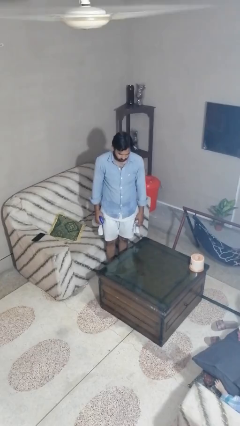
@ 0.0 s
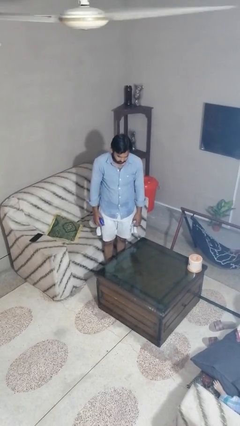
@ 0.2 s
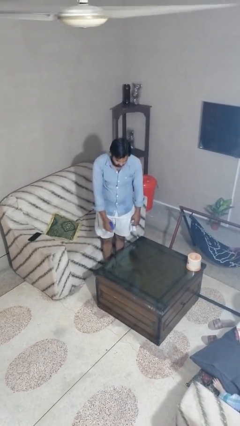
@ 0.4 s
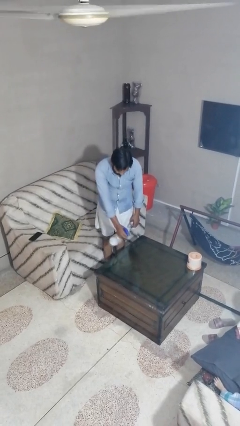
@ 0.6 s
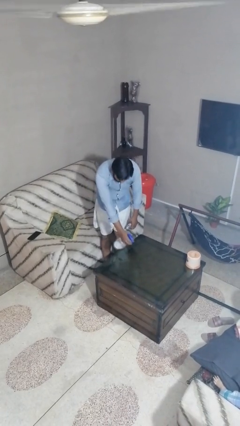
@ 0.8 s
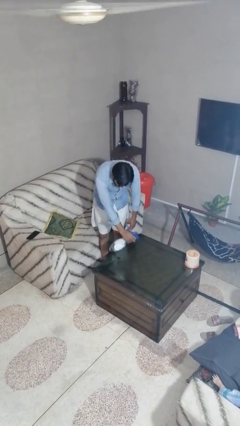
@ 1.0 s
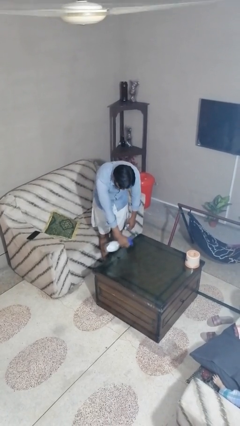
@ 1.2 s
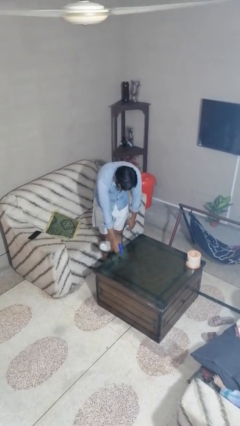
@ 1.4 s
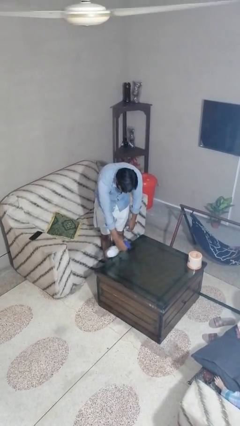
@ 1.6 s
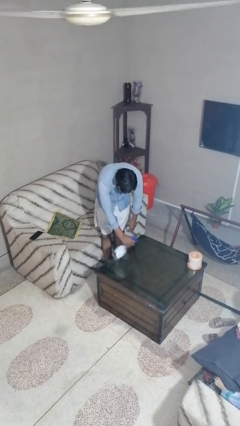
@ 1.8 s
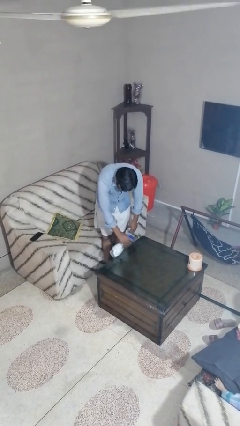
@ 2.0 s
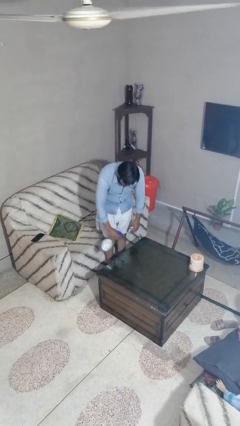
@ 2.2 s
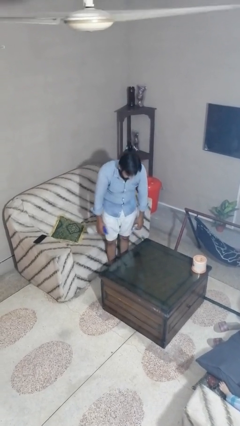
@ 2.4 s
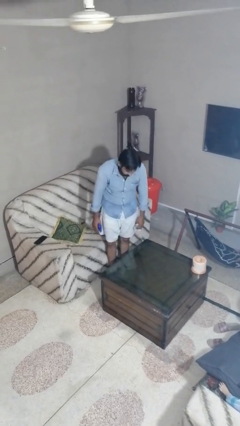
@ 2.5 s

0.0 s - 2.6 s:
person sprays from bottle

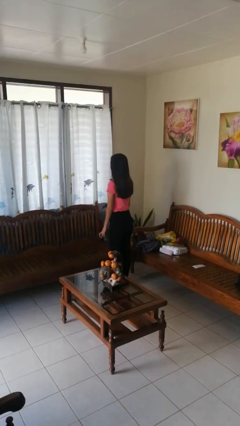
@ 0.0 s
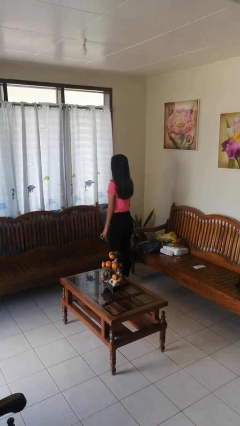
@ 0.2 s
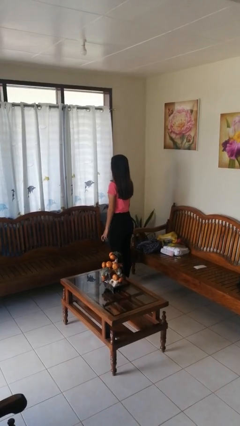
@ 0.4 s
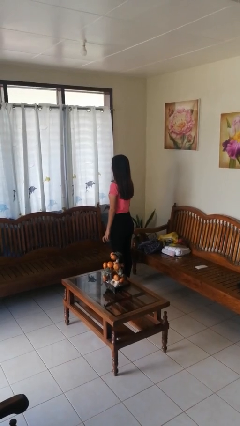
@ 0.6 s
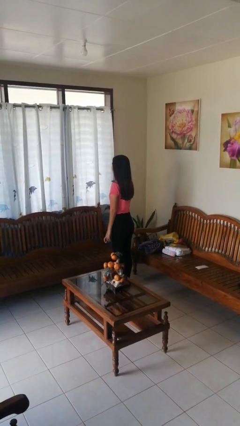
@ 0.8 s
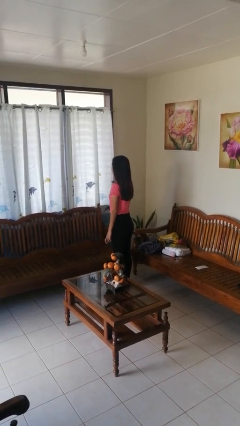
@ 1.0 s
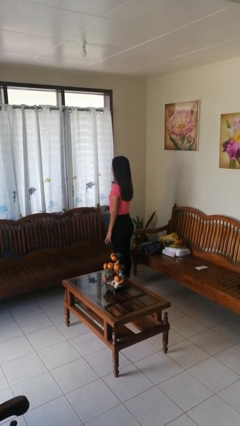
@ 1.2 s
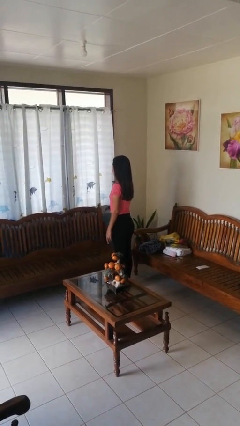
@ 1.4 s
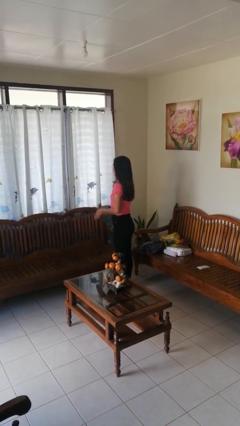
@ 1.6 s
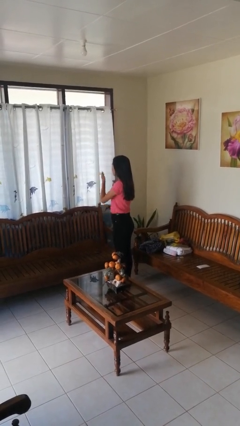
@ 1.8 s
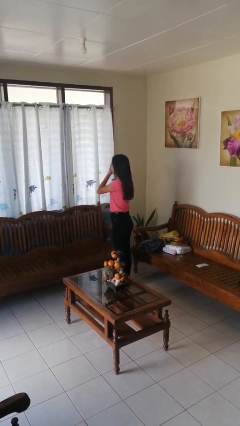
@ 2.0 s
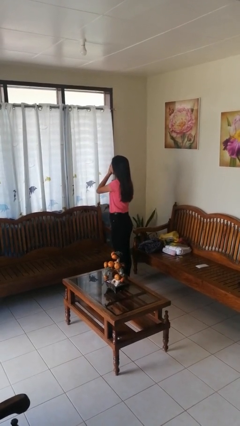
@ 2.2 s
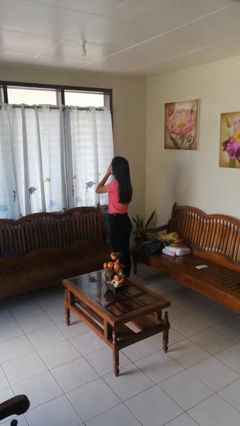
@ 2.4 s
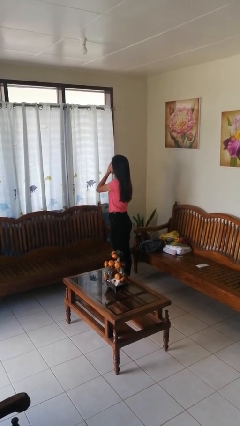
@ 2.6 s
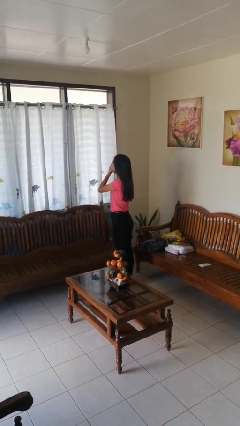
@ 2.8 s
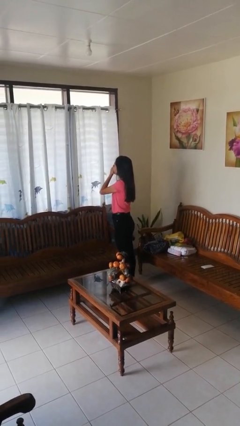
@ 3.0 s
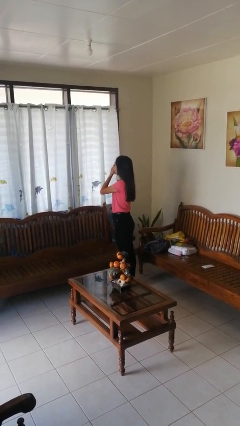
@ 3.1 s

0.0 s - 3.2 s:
person yawns

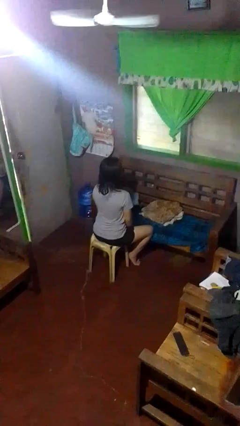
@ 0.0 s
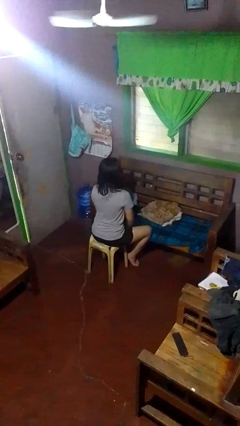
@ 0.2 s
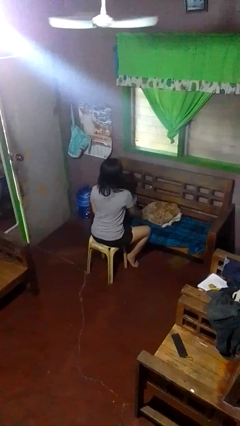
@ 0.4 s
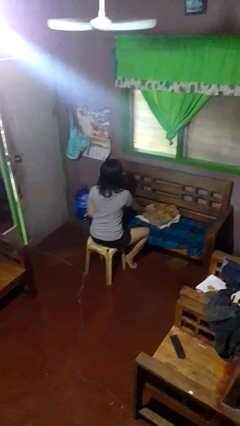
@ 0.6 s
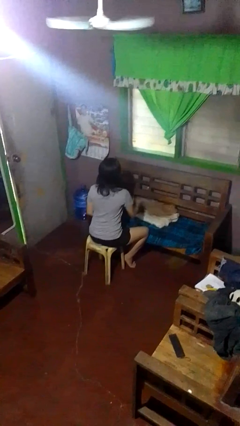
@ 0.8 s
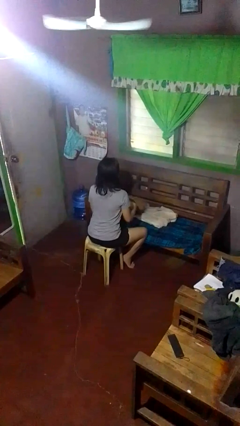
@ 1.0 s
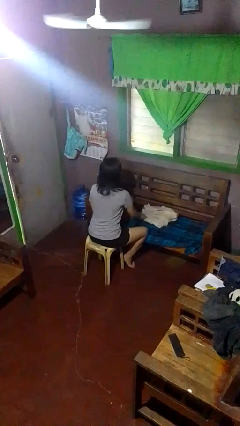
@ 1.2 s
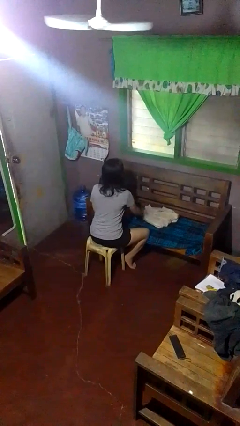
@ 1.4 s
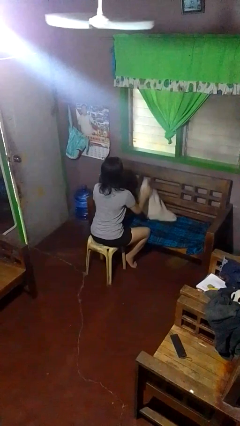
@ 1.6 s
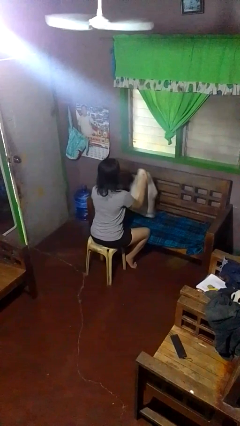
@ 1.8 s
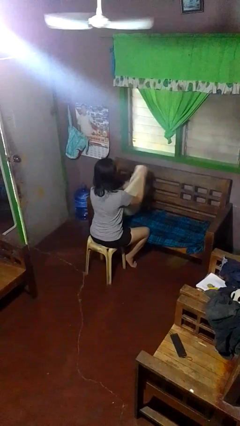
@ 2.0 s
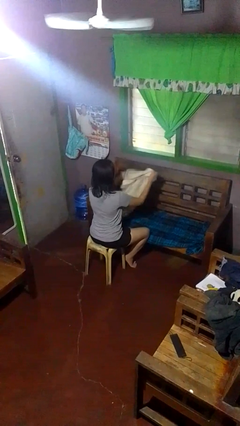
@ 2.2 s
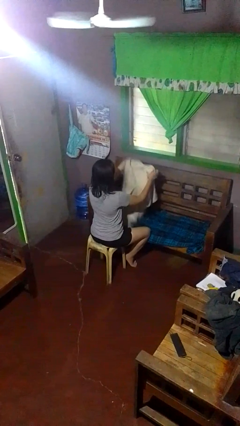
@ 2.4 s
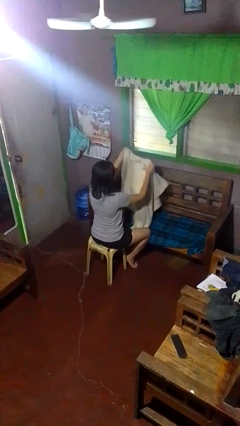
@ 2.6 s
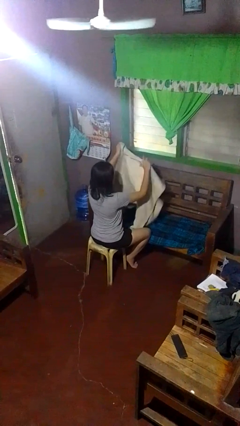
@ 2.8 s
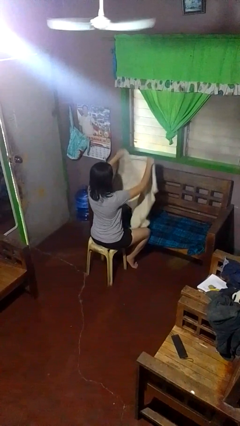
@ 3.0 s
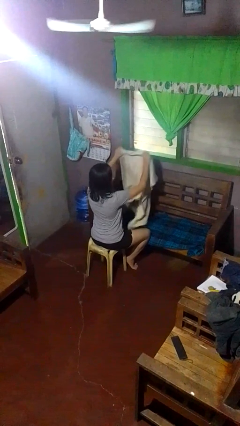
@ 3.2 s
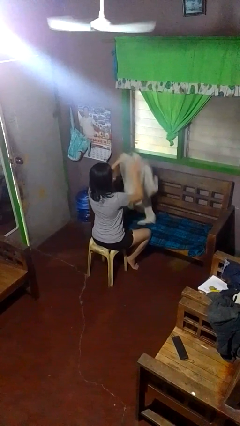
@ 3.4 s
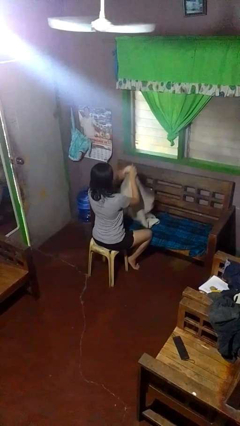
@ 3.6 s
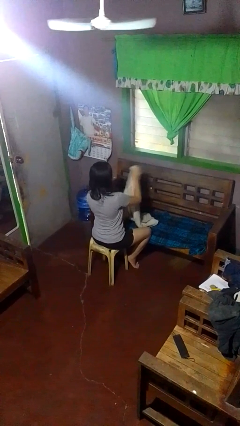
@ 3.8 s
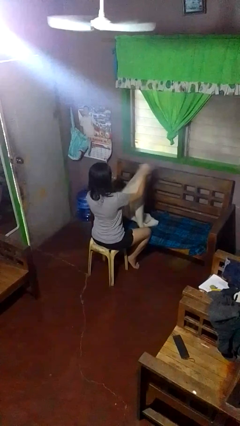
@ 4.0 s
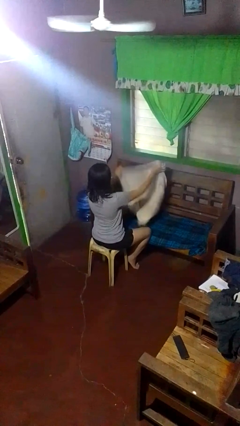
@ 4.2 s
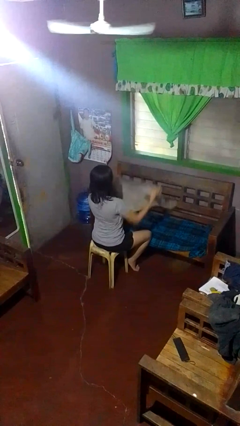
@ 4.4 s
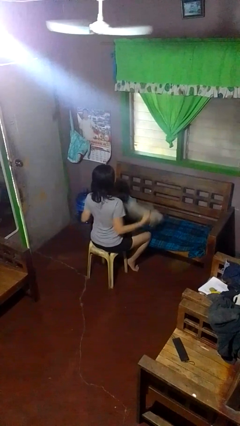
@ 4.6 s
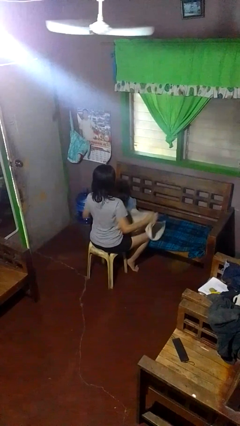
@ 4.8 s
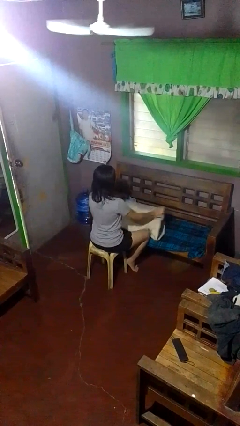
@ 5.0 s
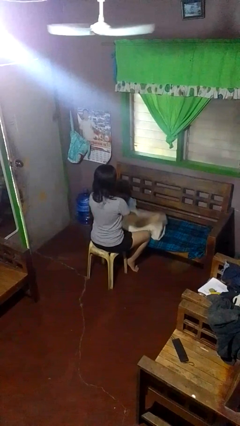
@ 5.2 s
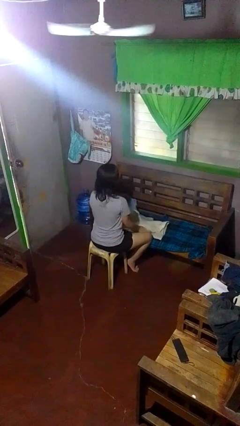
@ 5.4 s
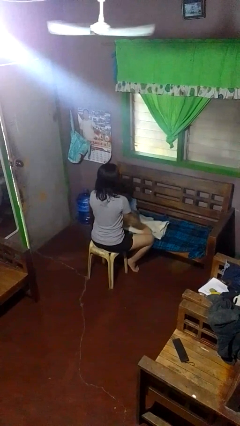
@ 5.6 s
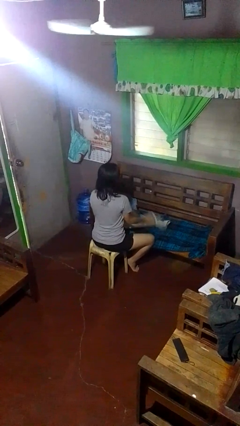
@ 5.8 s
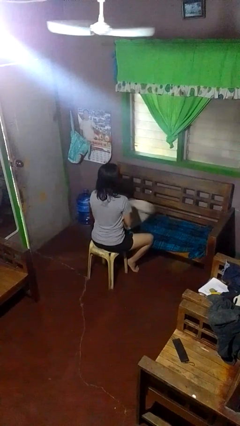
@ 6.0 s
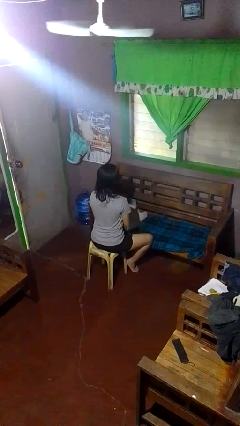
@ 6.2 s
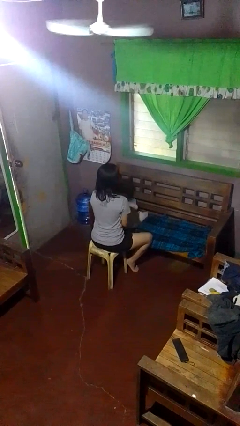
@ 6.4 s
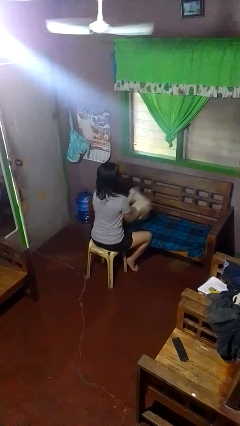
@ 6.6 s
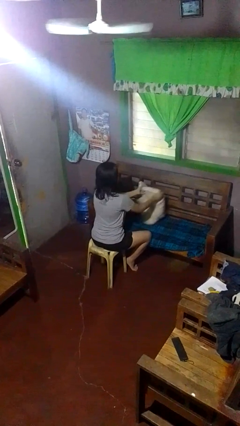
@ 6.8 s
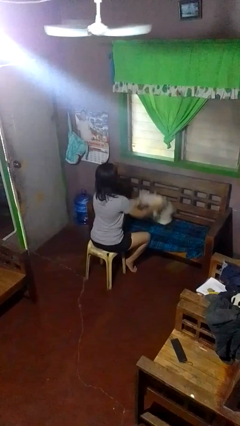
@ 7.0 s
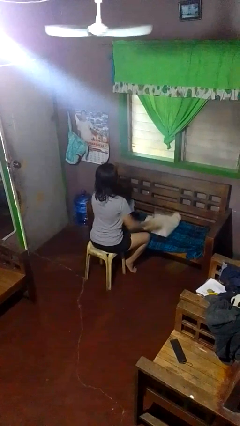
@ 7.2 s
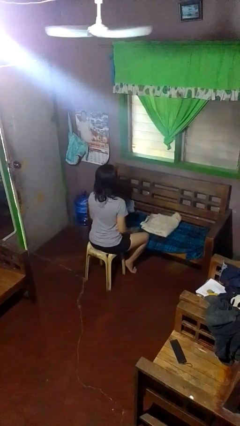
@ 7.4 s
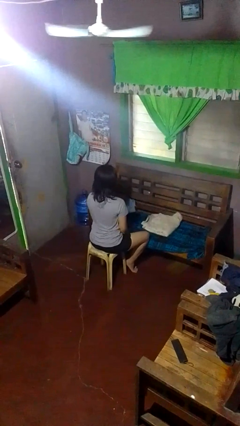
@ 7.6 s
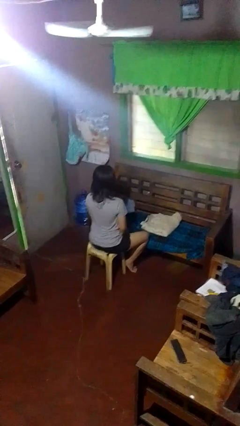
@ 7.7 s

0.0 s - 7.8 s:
person folds towel

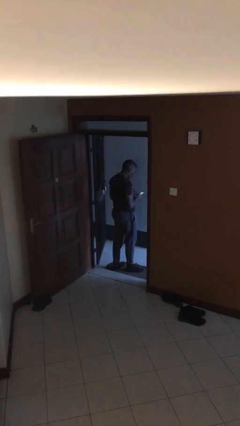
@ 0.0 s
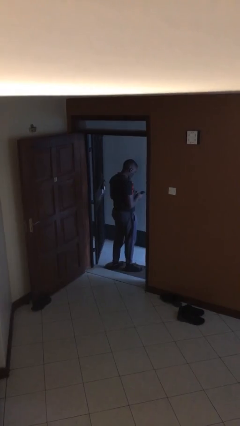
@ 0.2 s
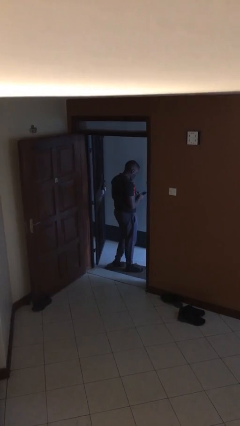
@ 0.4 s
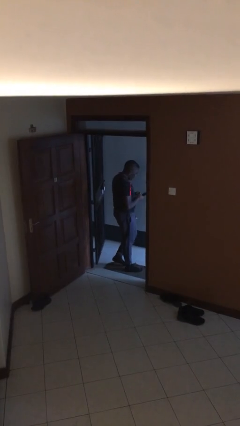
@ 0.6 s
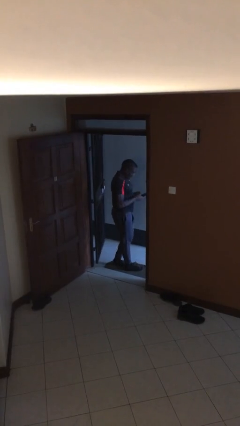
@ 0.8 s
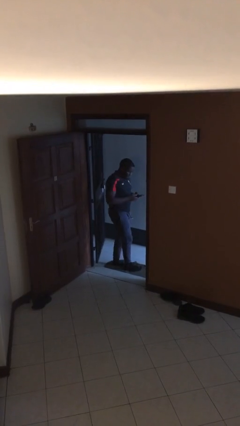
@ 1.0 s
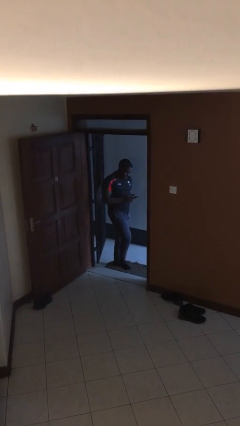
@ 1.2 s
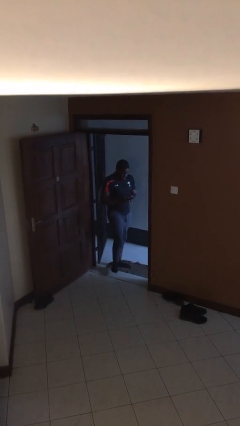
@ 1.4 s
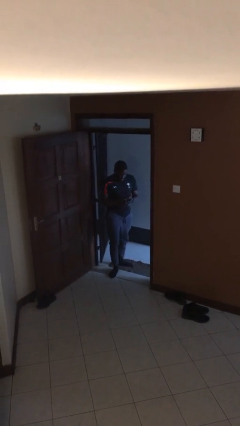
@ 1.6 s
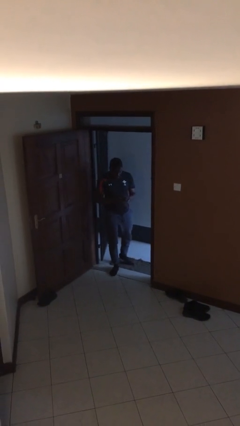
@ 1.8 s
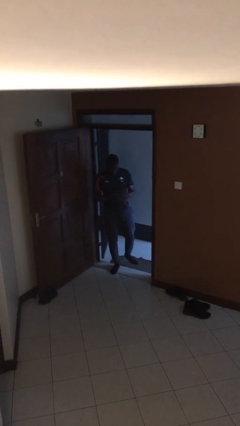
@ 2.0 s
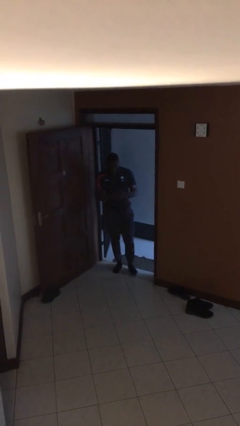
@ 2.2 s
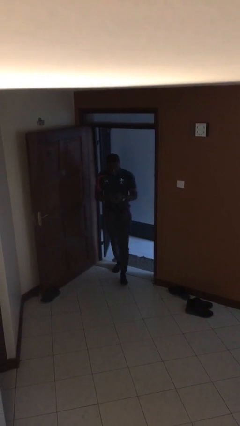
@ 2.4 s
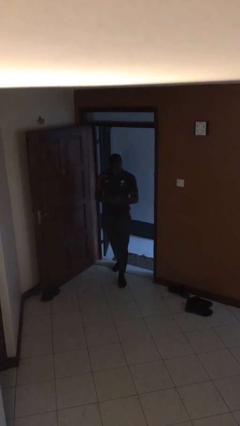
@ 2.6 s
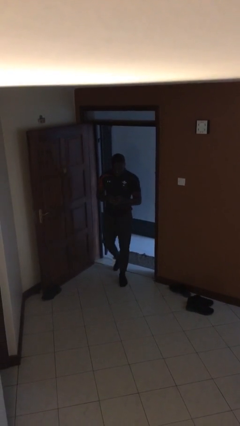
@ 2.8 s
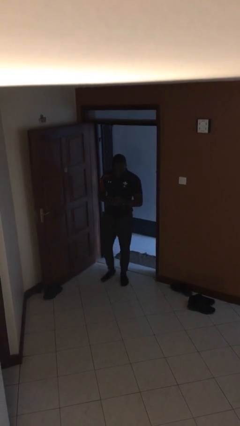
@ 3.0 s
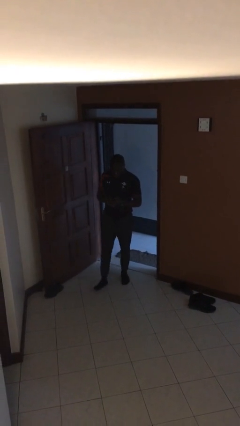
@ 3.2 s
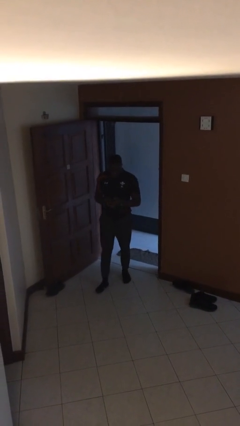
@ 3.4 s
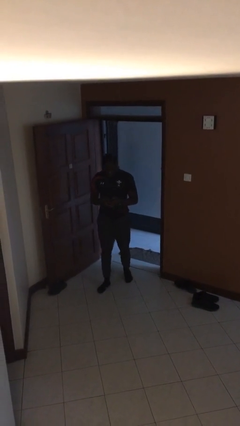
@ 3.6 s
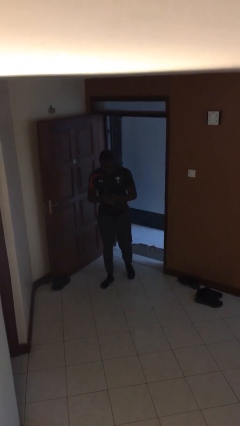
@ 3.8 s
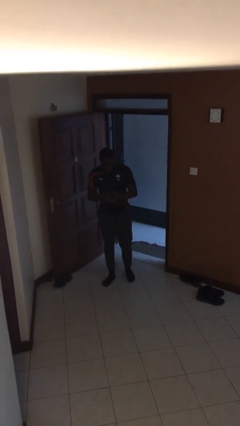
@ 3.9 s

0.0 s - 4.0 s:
person enters scene through structure
